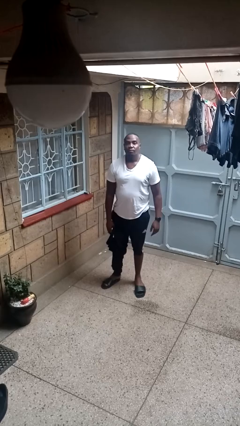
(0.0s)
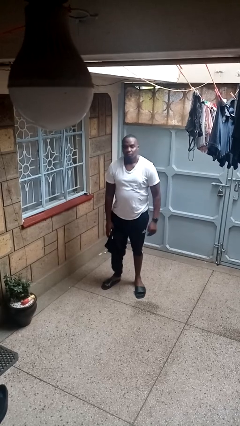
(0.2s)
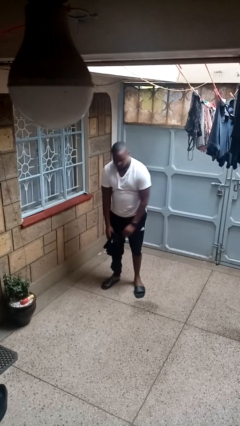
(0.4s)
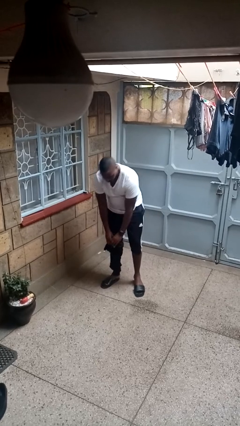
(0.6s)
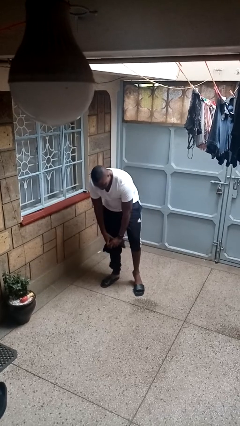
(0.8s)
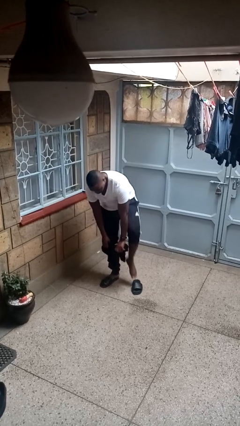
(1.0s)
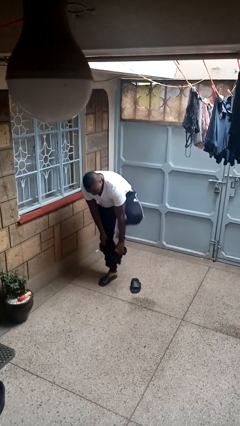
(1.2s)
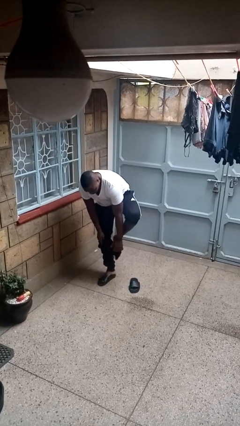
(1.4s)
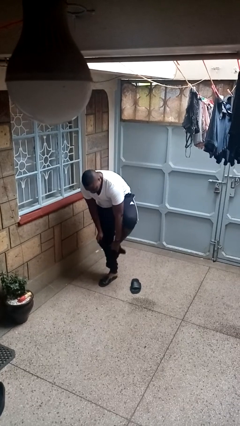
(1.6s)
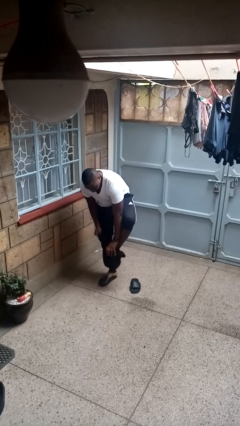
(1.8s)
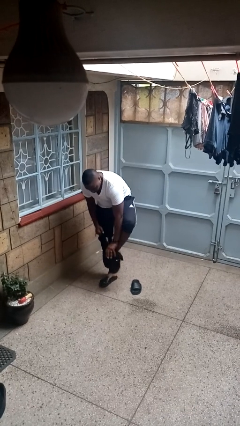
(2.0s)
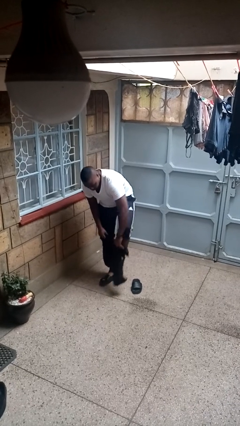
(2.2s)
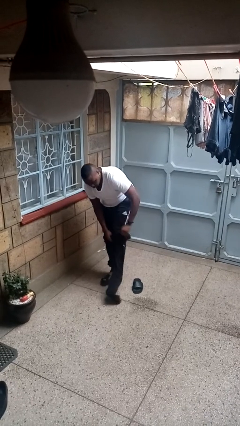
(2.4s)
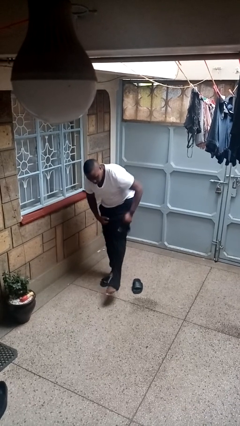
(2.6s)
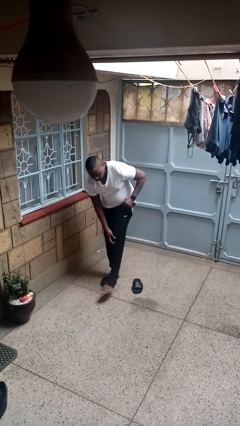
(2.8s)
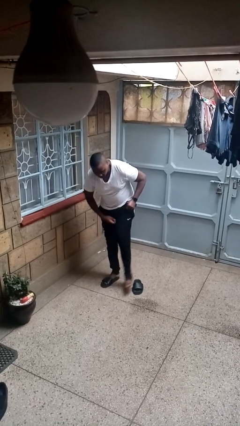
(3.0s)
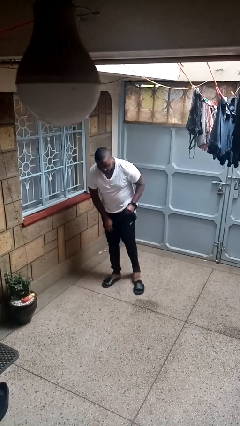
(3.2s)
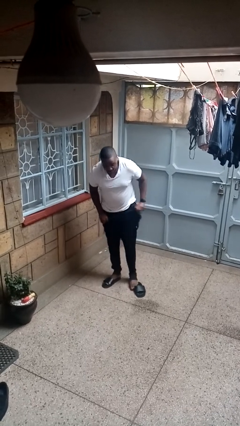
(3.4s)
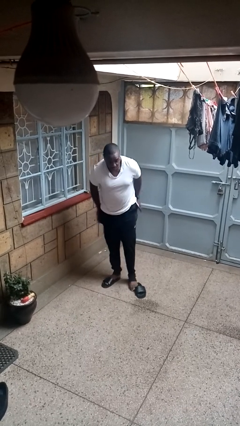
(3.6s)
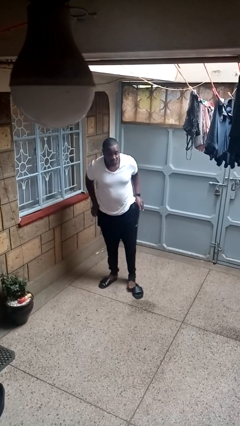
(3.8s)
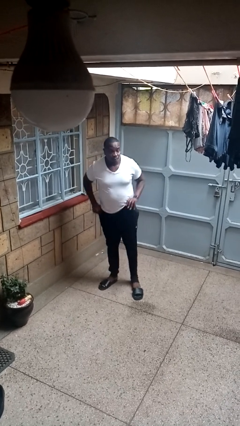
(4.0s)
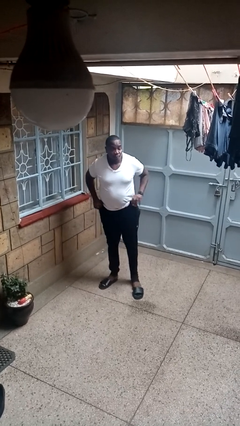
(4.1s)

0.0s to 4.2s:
person puts on pants

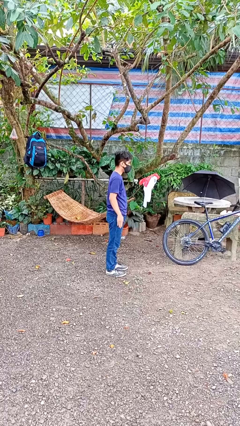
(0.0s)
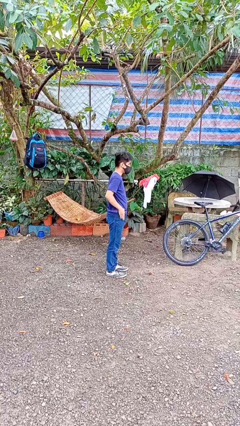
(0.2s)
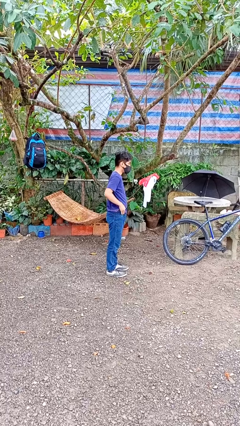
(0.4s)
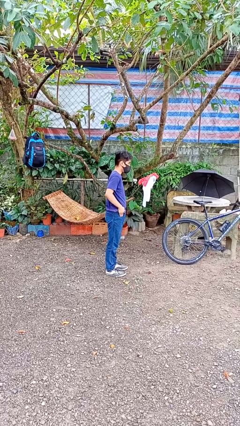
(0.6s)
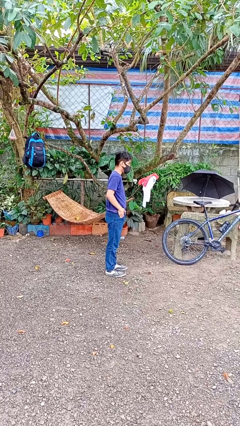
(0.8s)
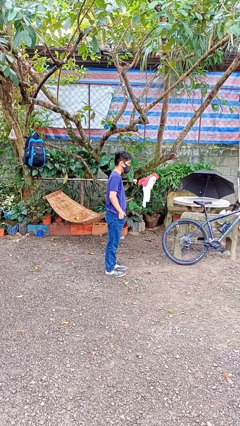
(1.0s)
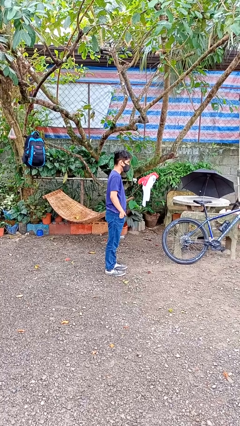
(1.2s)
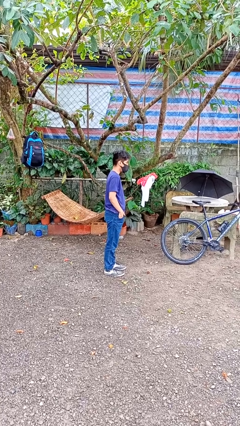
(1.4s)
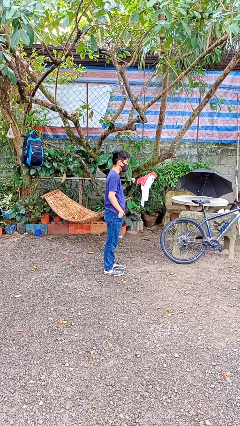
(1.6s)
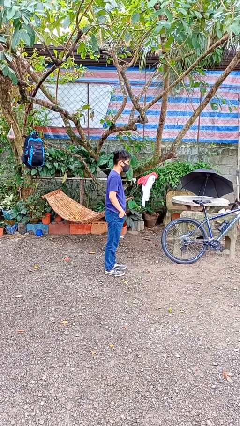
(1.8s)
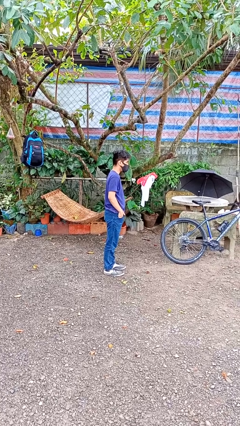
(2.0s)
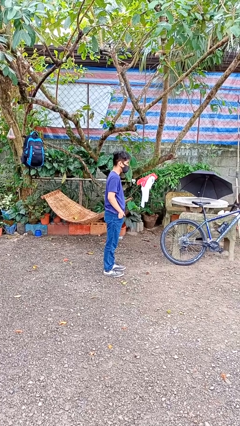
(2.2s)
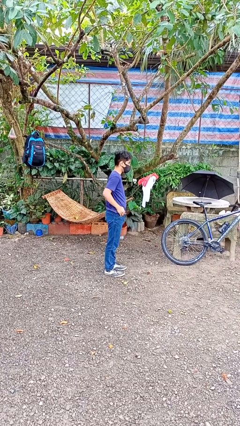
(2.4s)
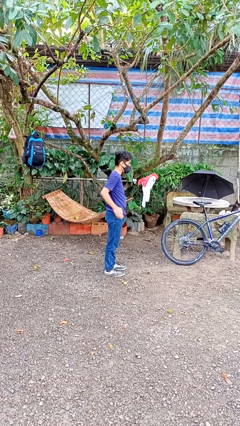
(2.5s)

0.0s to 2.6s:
person puts hands in back pockets

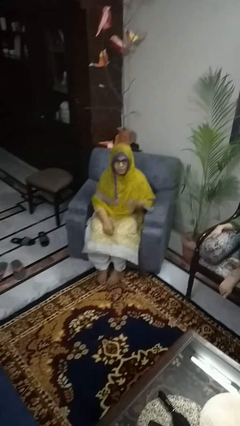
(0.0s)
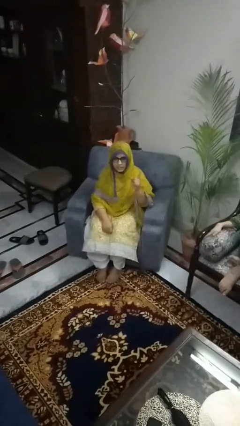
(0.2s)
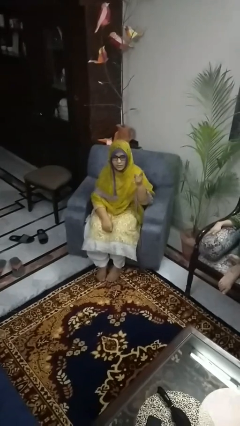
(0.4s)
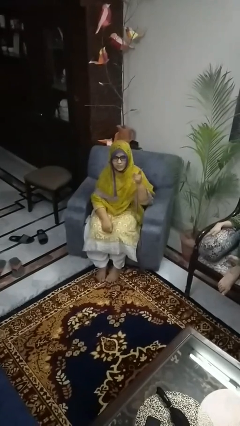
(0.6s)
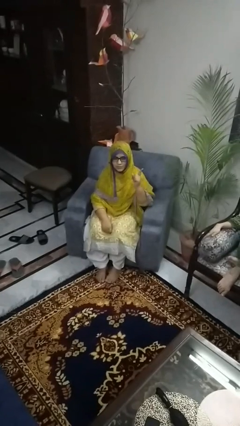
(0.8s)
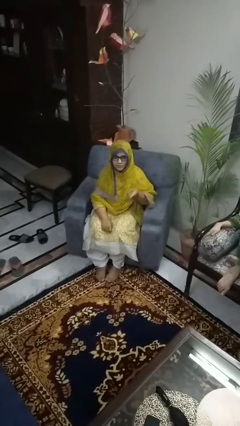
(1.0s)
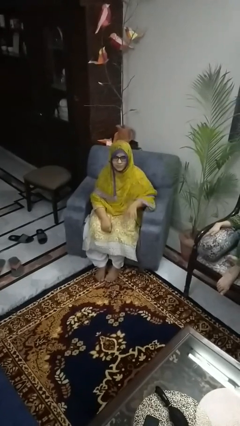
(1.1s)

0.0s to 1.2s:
person gestures number one

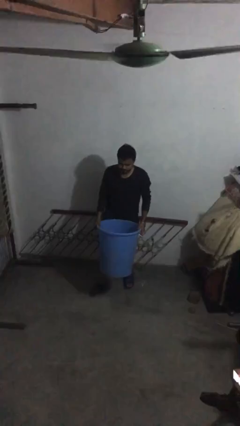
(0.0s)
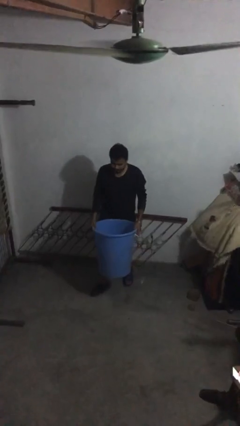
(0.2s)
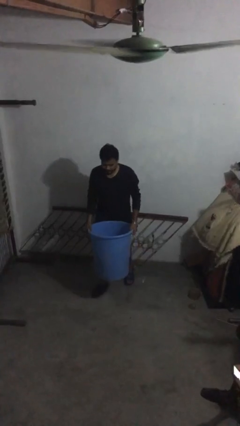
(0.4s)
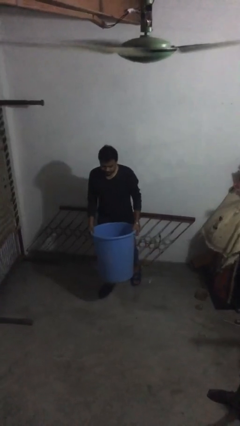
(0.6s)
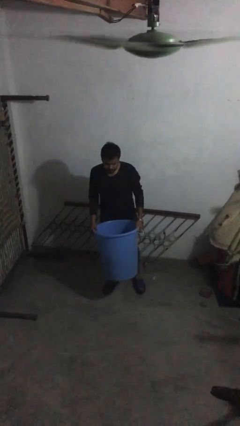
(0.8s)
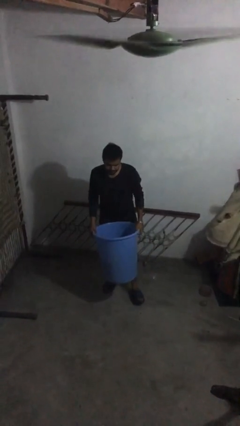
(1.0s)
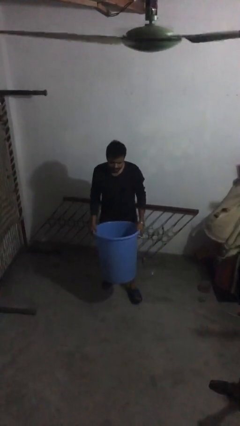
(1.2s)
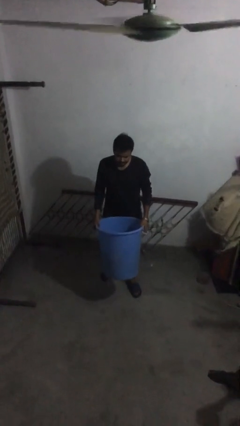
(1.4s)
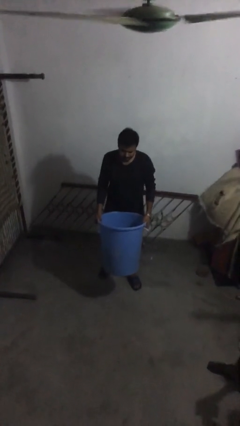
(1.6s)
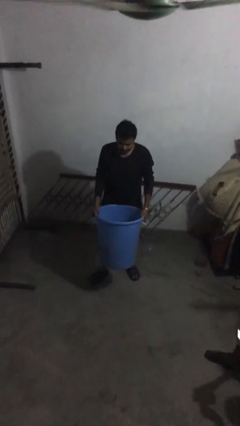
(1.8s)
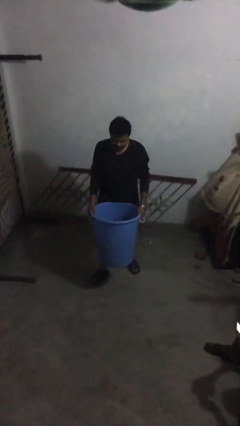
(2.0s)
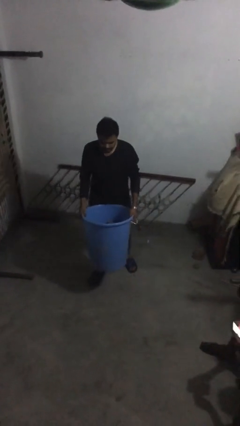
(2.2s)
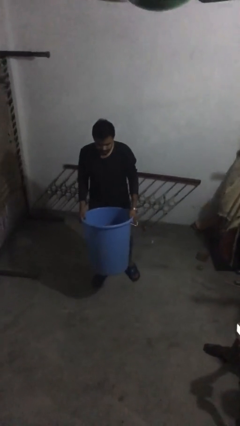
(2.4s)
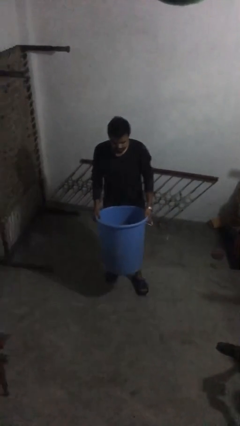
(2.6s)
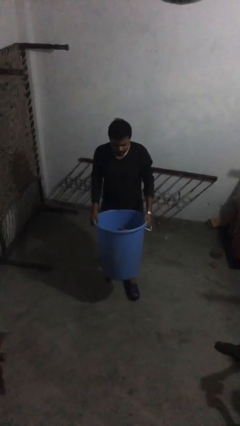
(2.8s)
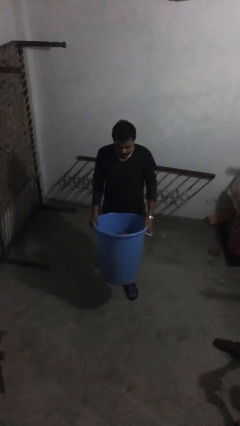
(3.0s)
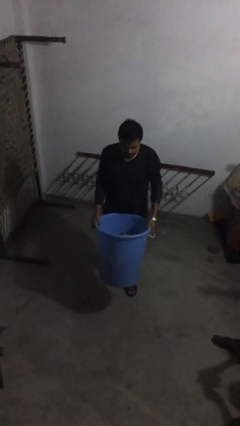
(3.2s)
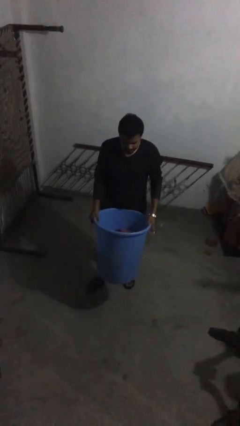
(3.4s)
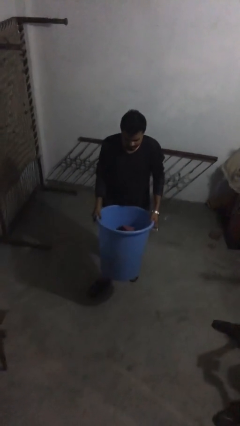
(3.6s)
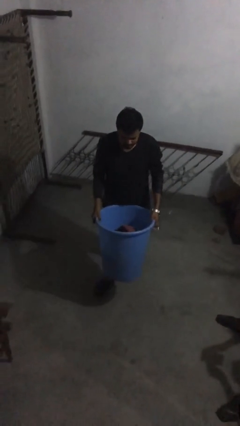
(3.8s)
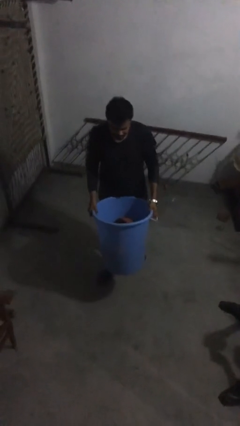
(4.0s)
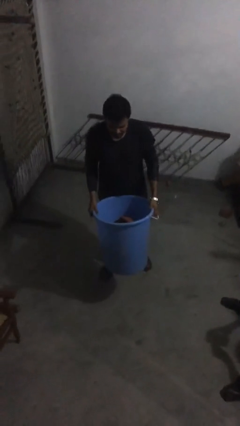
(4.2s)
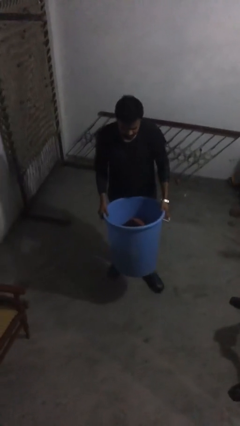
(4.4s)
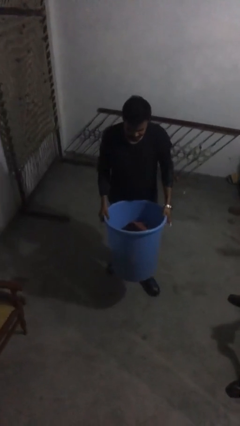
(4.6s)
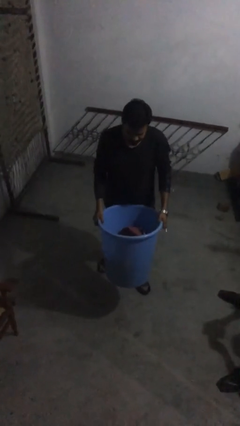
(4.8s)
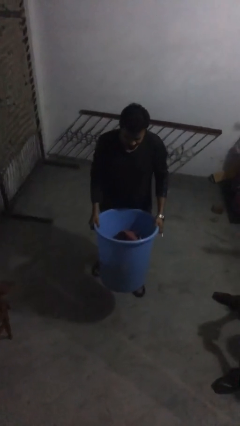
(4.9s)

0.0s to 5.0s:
person carries heavy object

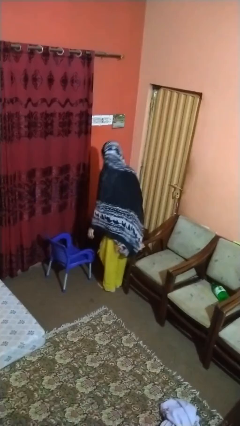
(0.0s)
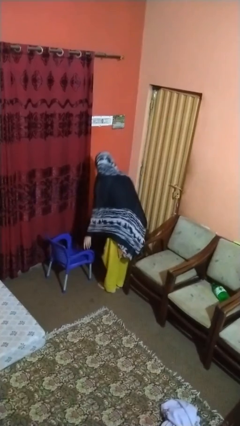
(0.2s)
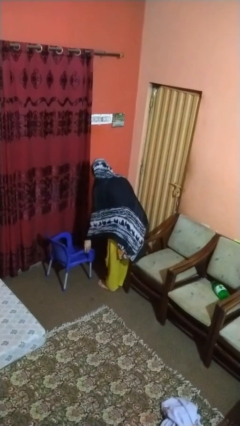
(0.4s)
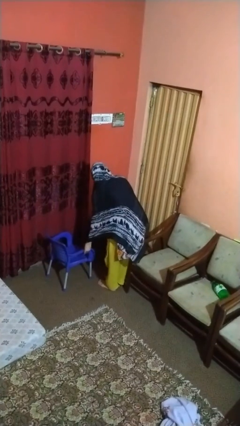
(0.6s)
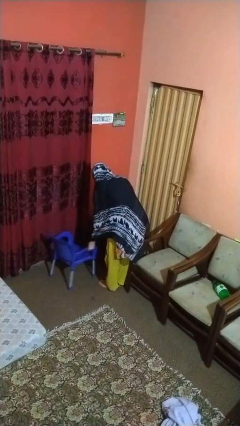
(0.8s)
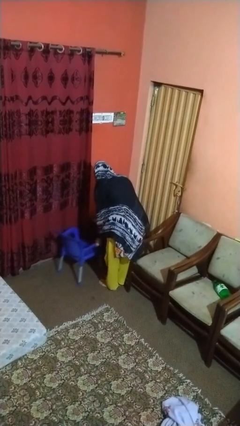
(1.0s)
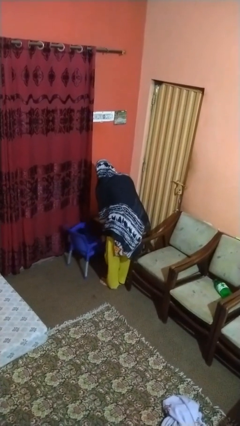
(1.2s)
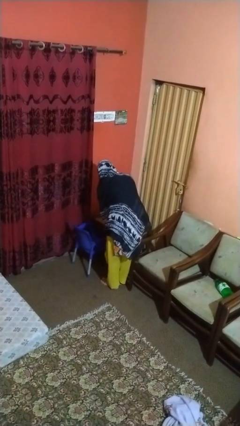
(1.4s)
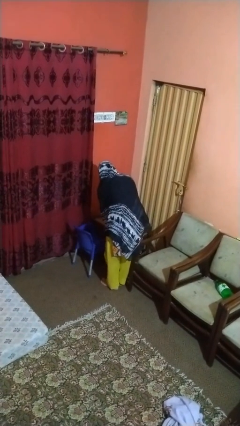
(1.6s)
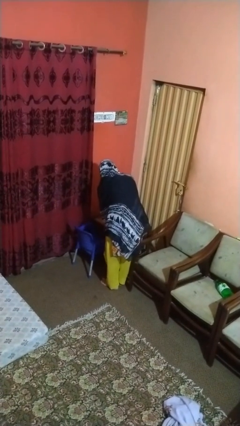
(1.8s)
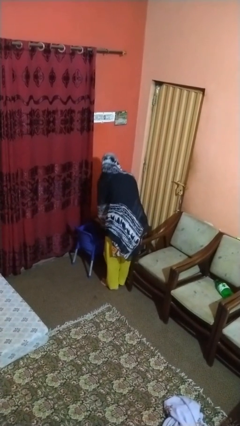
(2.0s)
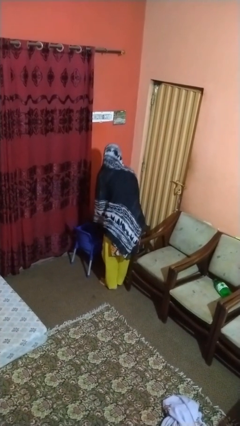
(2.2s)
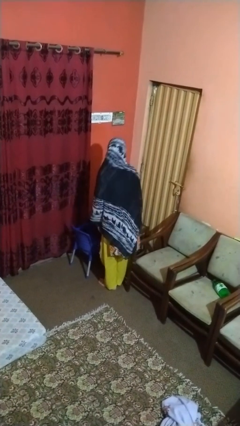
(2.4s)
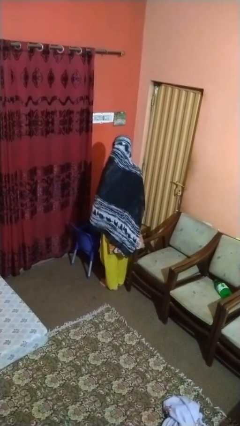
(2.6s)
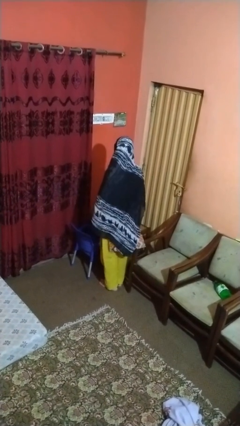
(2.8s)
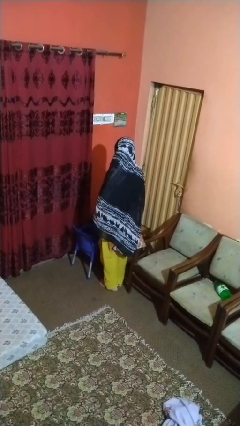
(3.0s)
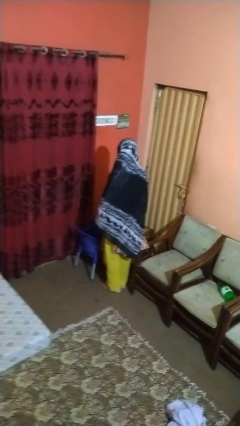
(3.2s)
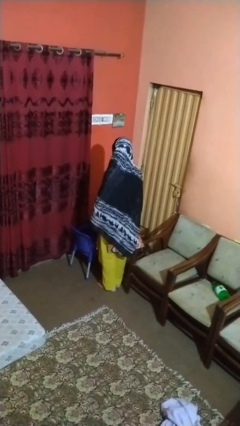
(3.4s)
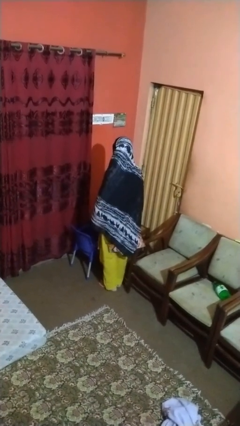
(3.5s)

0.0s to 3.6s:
person pushes in chair

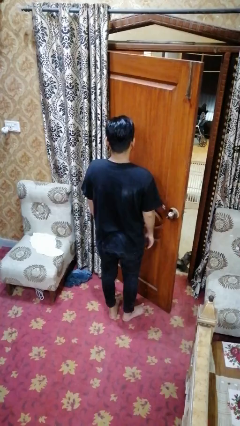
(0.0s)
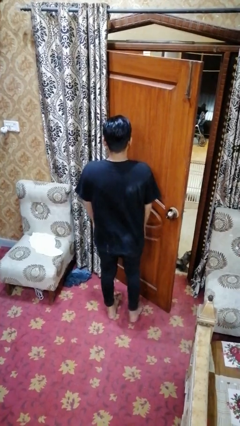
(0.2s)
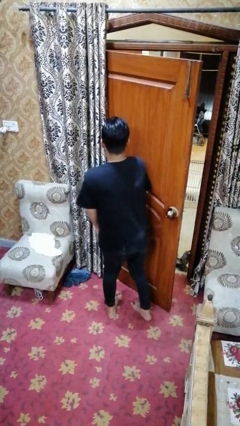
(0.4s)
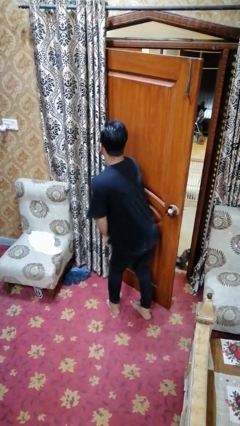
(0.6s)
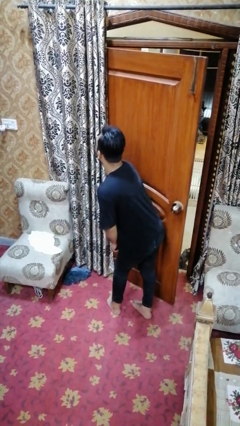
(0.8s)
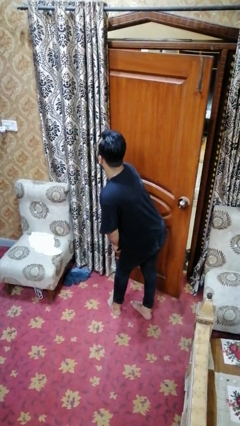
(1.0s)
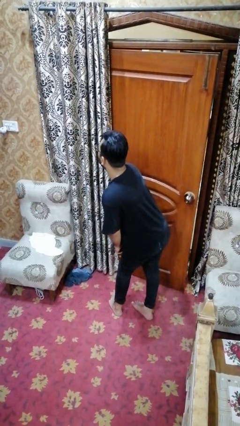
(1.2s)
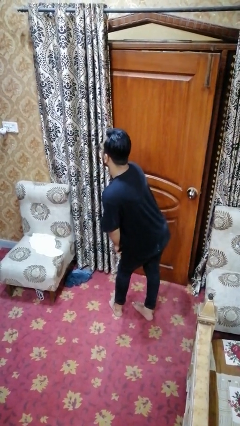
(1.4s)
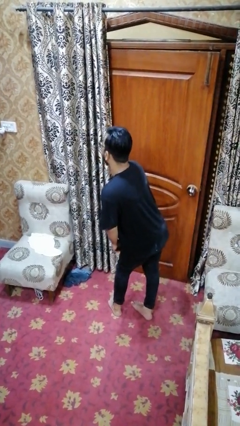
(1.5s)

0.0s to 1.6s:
person closes door with hip
